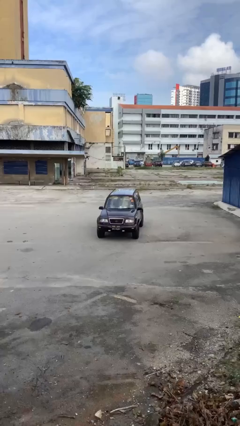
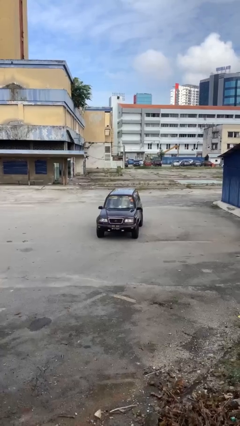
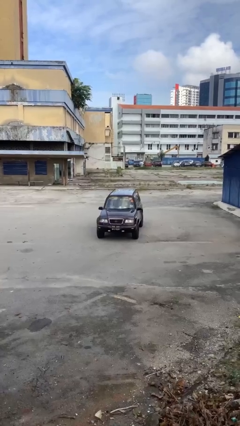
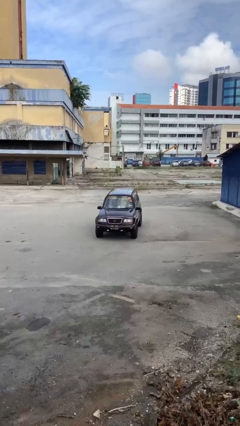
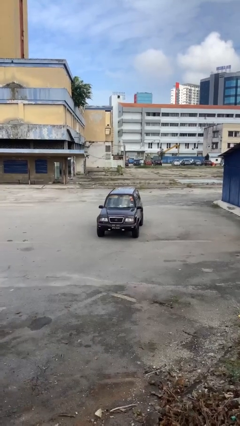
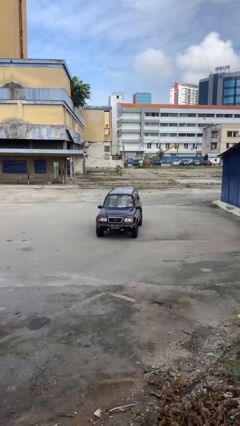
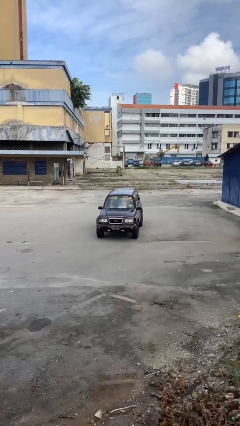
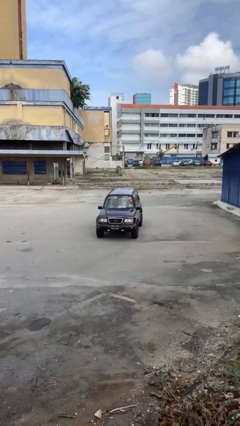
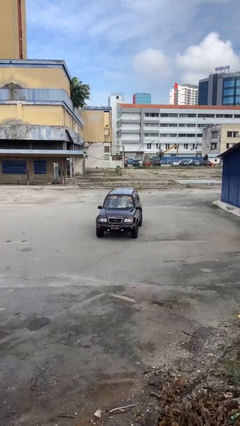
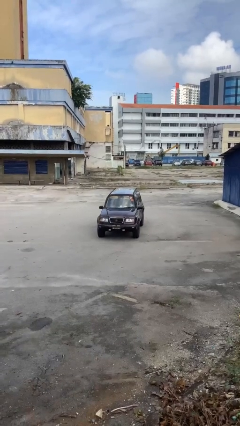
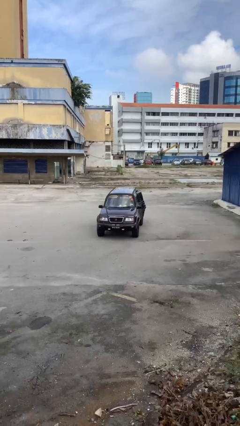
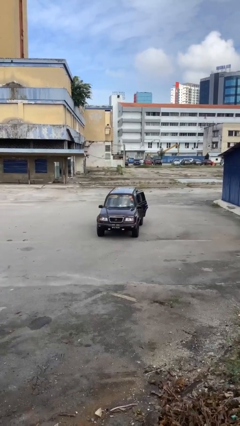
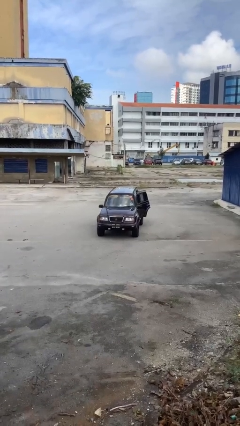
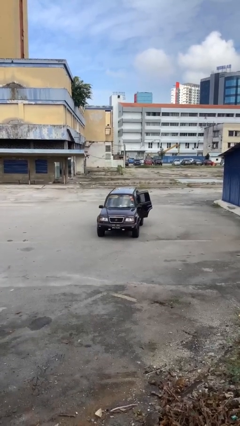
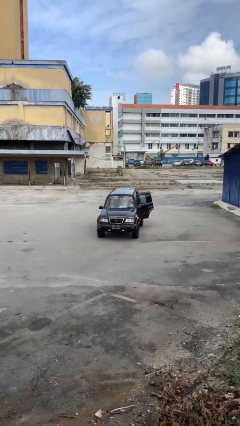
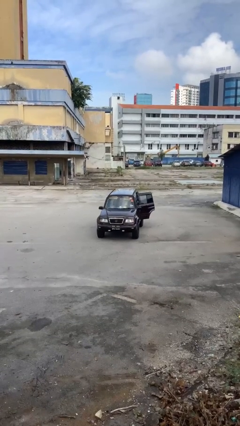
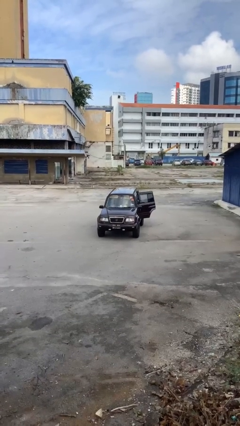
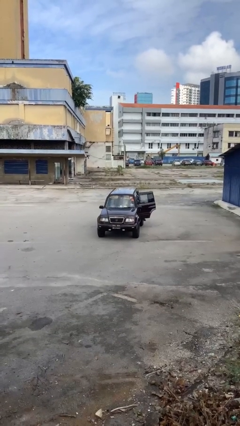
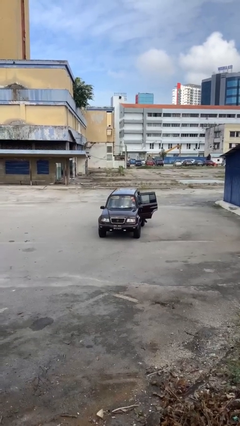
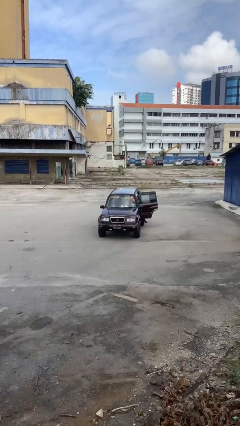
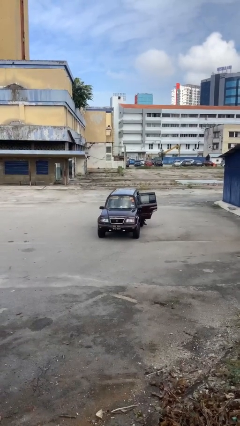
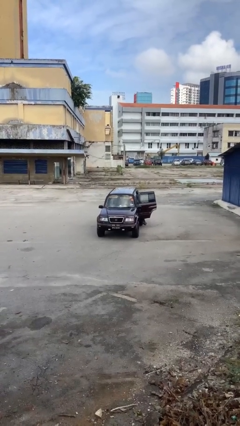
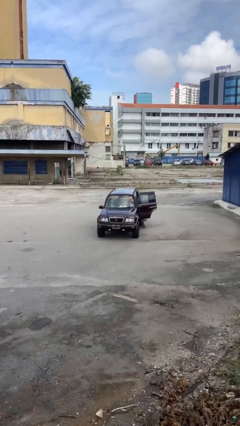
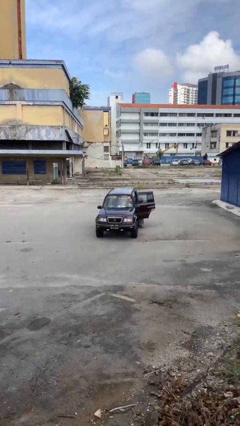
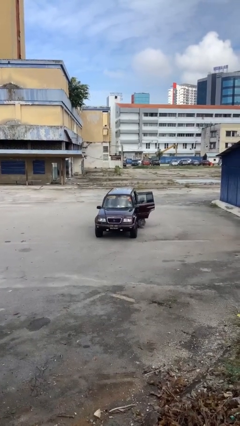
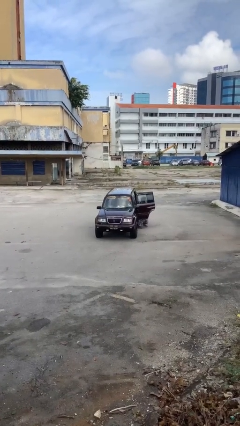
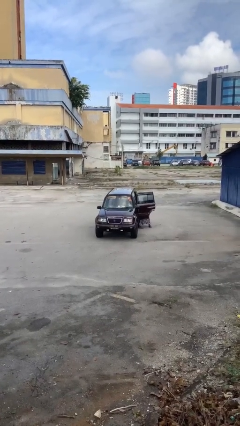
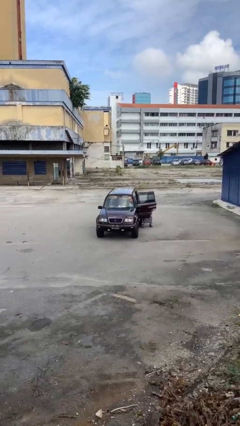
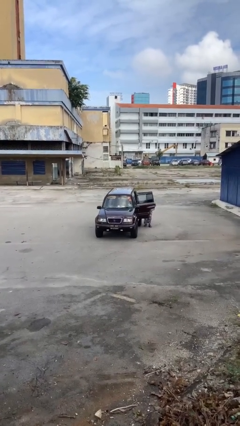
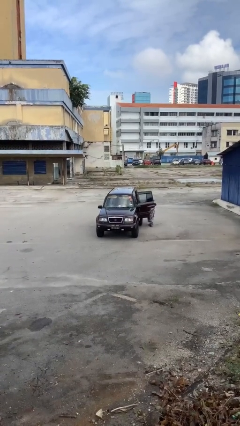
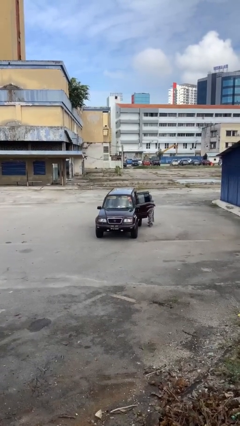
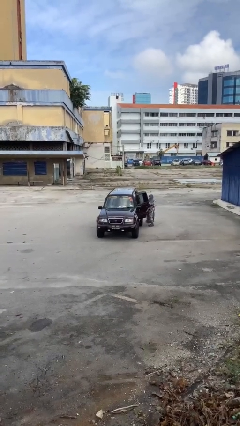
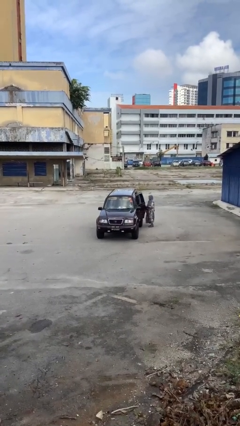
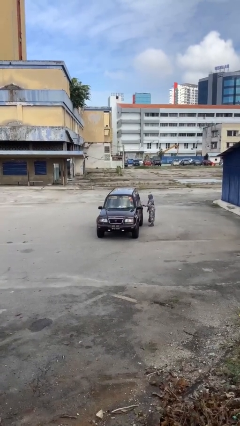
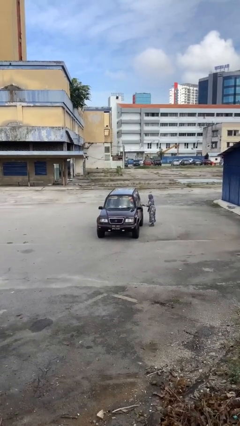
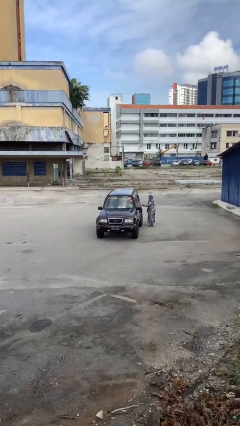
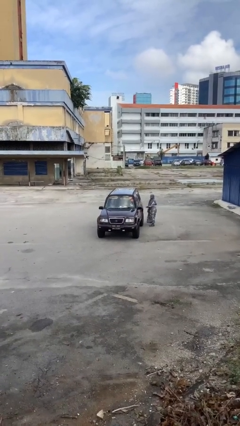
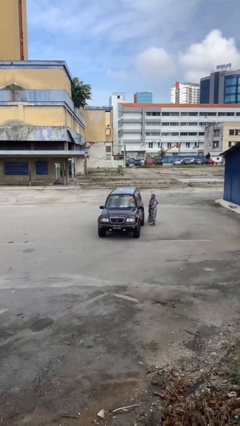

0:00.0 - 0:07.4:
car drops off person

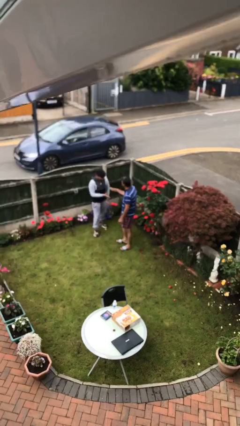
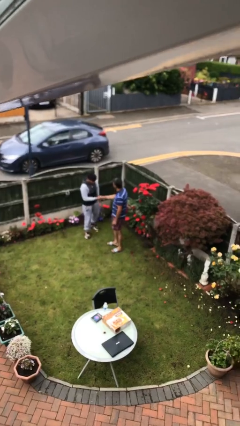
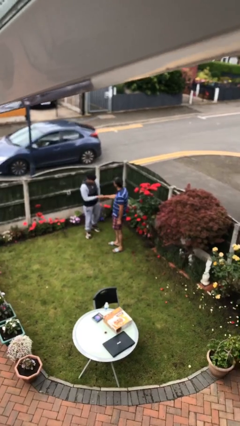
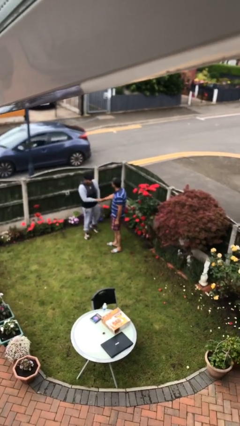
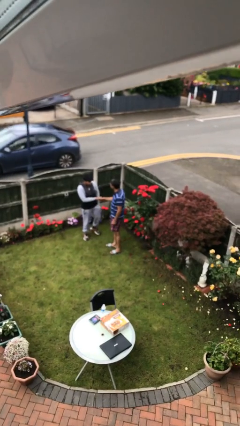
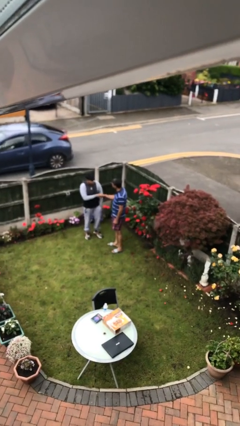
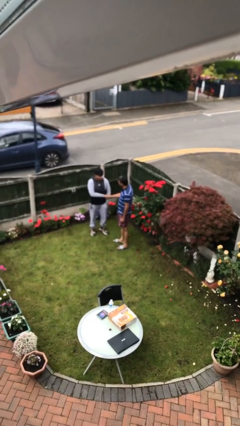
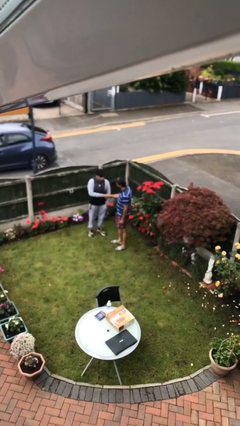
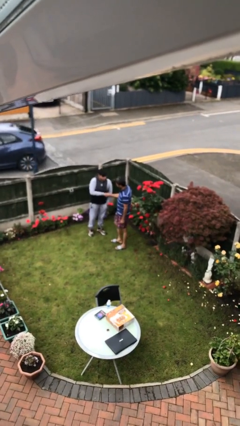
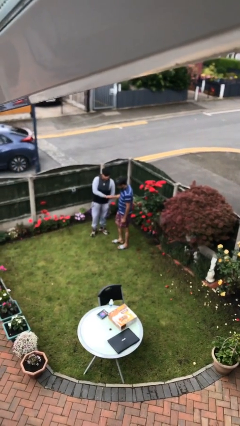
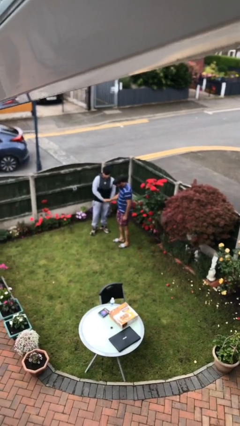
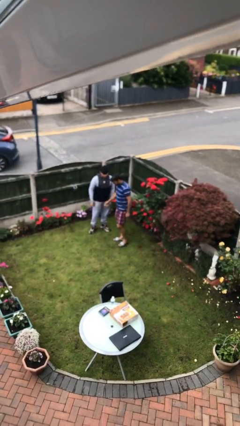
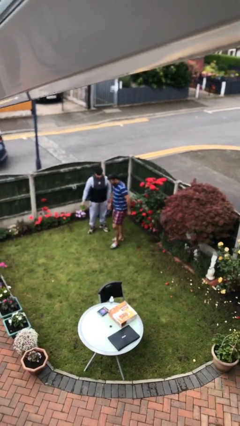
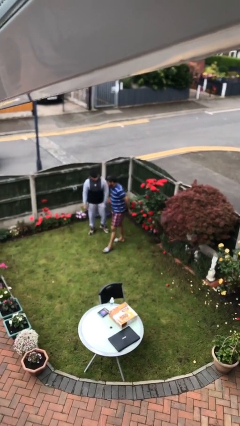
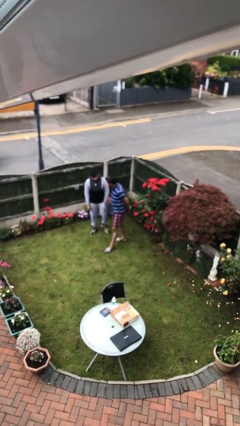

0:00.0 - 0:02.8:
person shakes hand

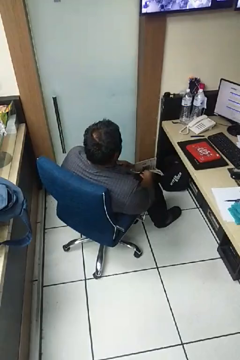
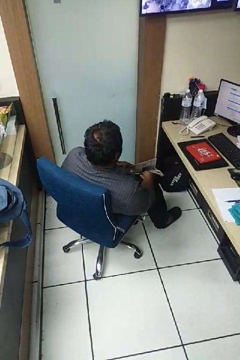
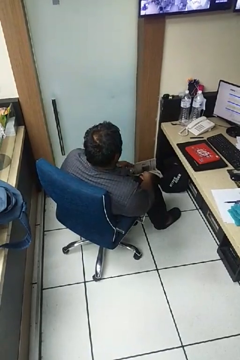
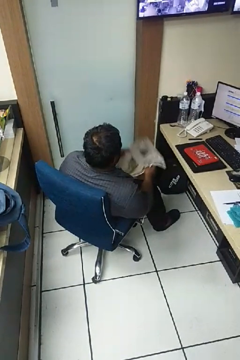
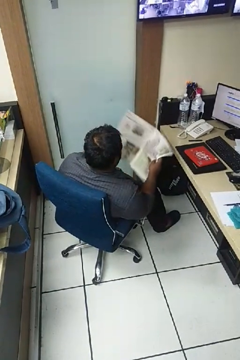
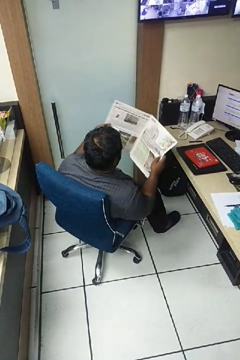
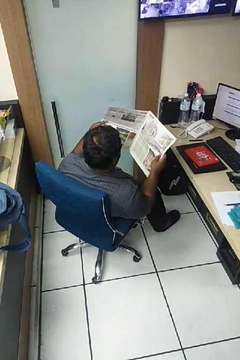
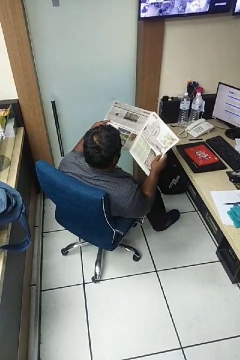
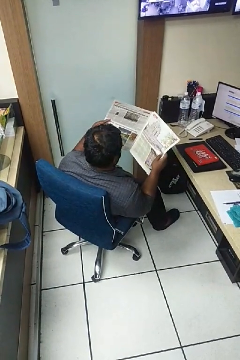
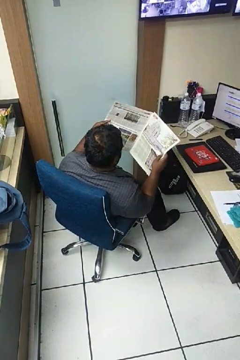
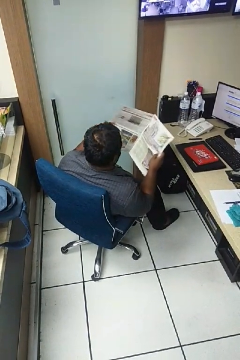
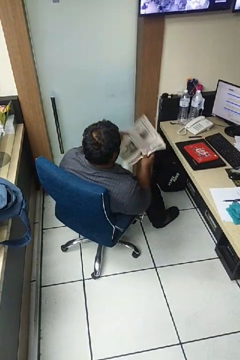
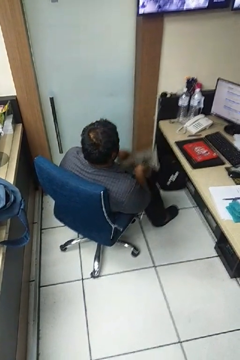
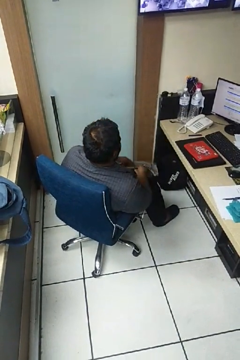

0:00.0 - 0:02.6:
person reads newspaper

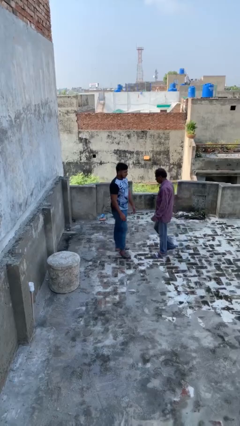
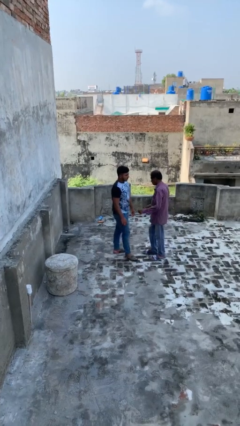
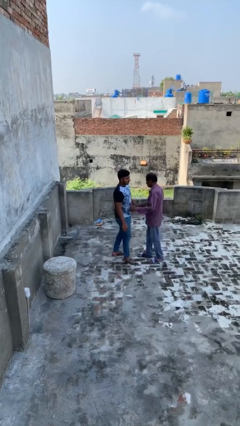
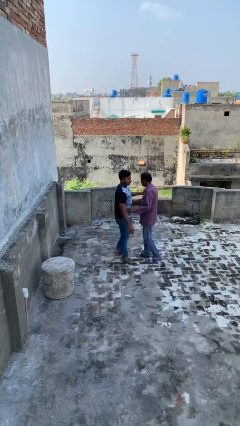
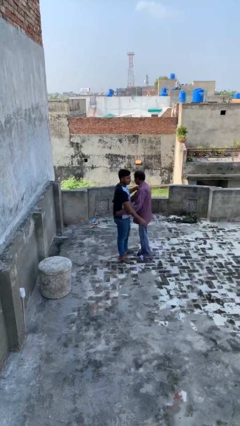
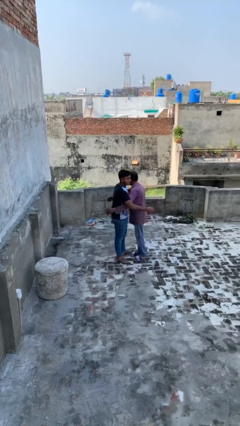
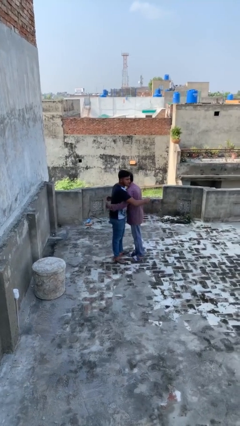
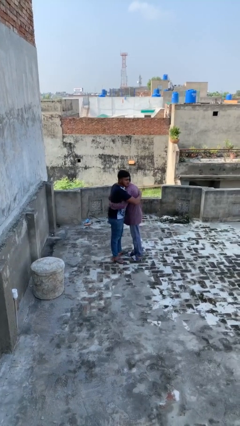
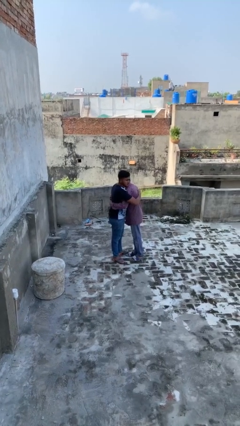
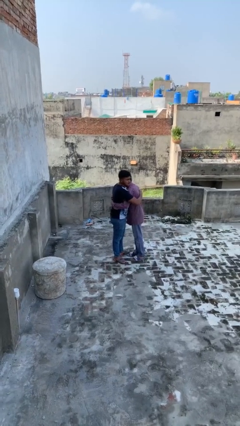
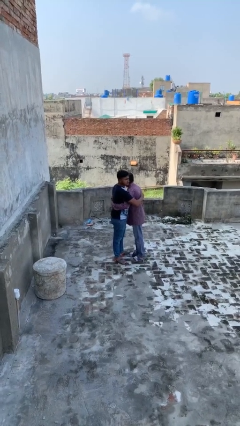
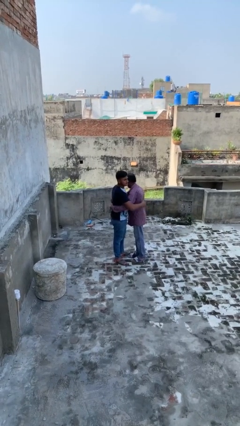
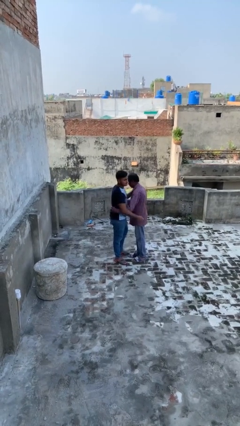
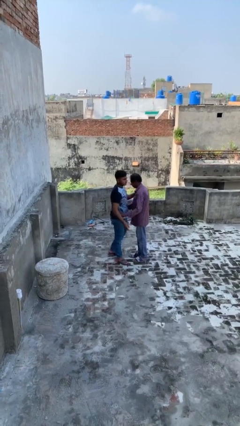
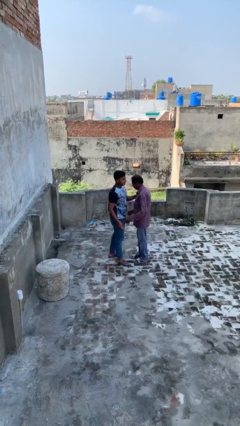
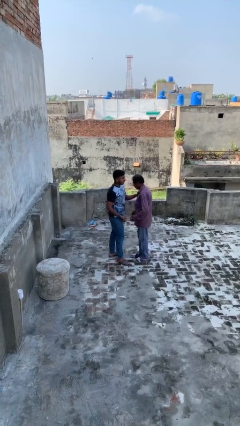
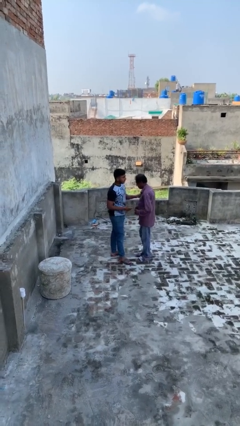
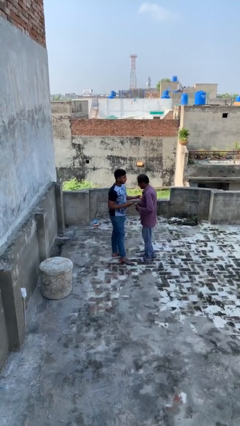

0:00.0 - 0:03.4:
person embraces person

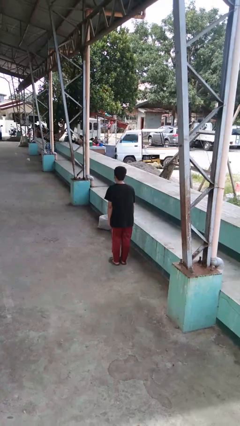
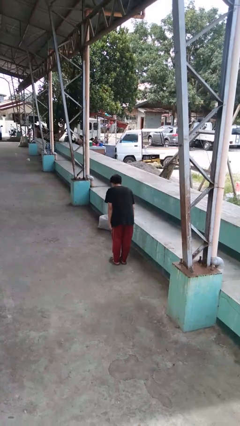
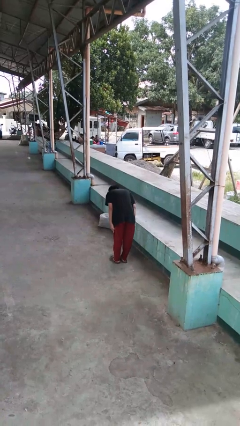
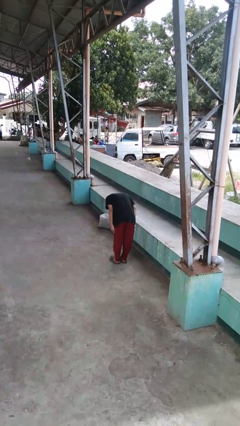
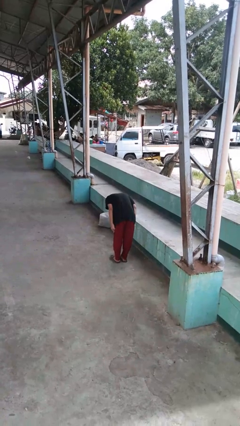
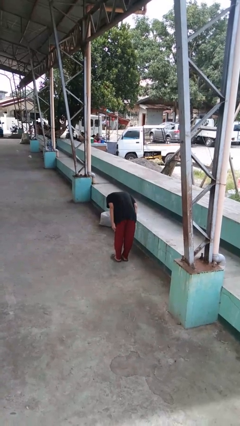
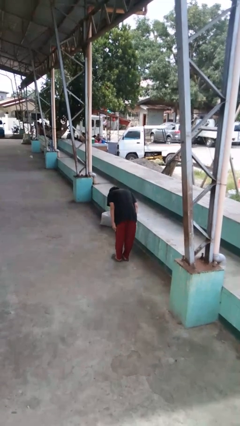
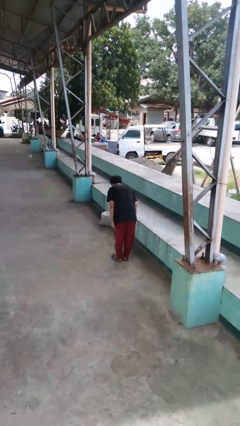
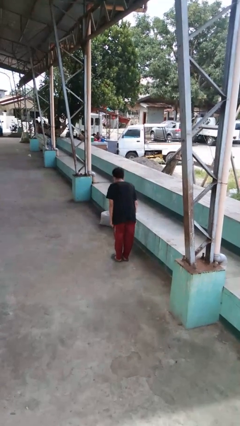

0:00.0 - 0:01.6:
person bows
